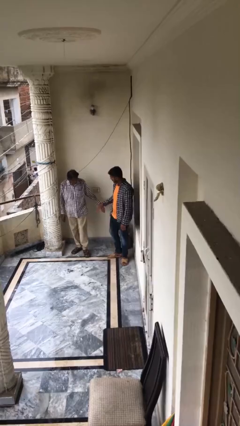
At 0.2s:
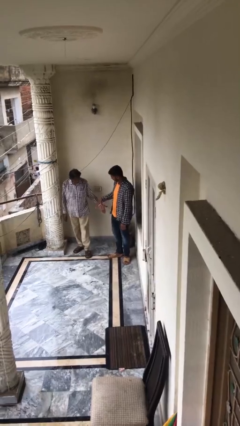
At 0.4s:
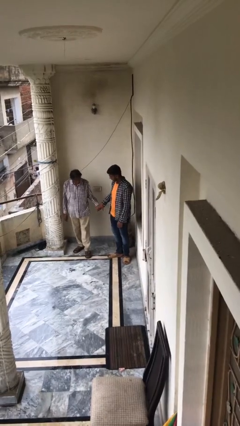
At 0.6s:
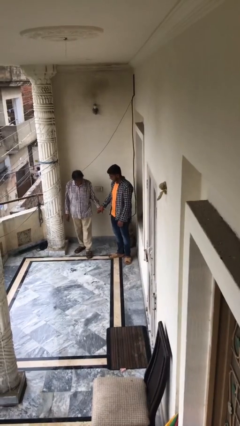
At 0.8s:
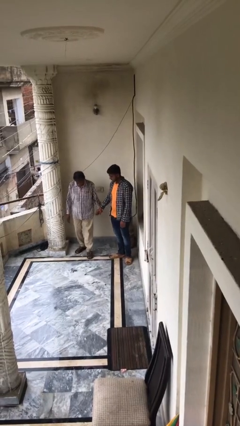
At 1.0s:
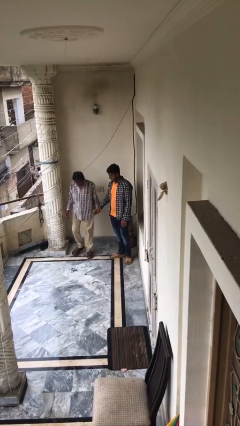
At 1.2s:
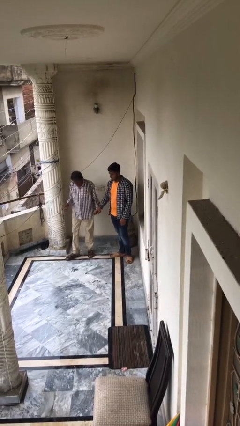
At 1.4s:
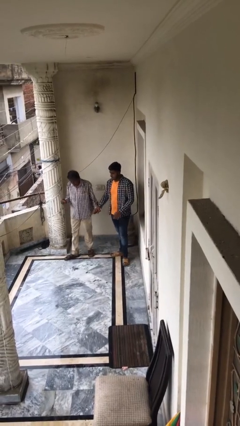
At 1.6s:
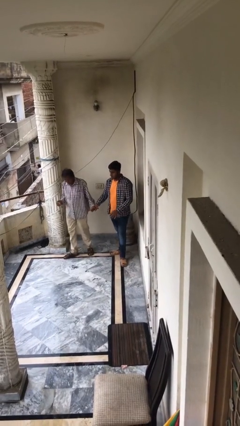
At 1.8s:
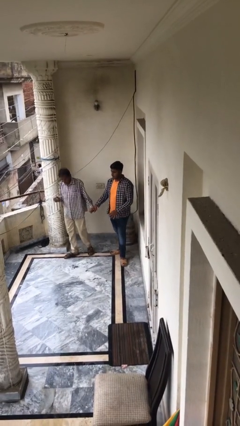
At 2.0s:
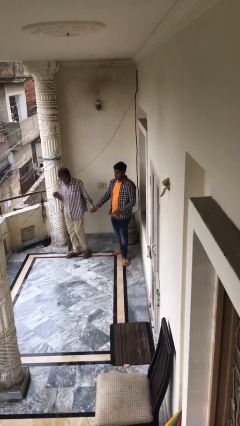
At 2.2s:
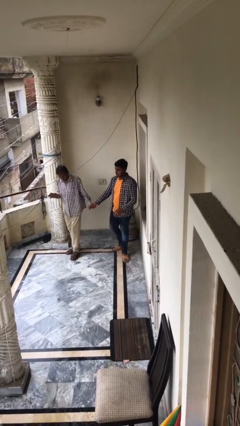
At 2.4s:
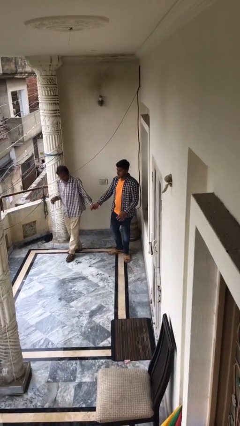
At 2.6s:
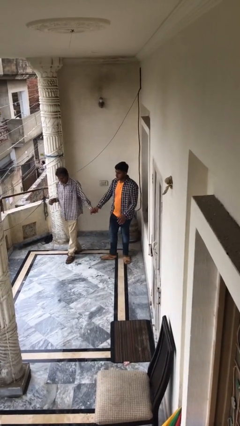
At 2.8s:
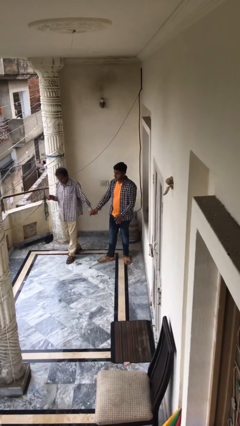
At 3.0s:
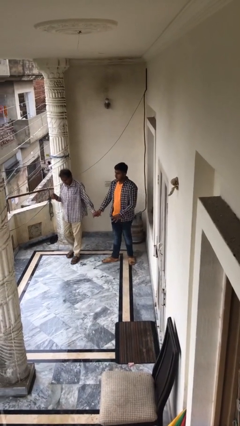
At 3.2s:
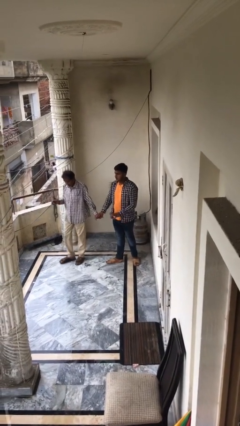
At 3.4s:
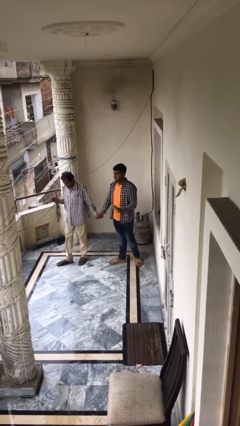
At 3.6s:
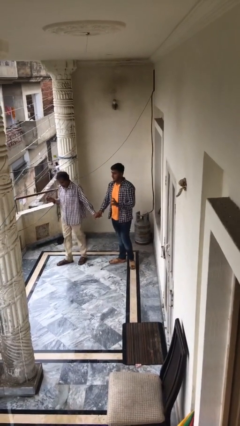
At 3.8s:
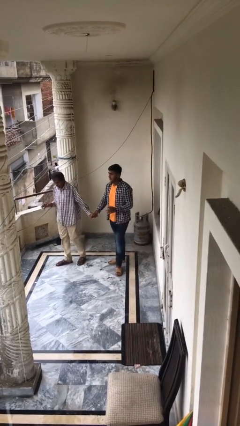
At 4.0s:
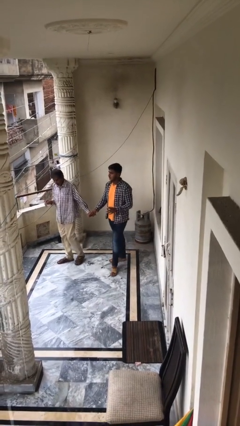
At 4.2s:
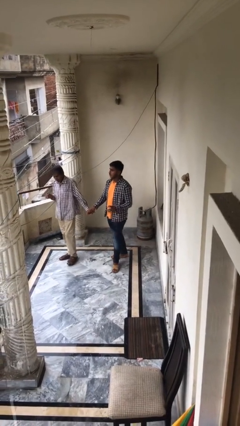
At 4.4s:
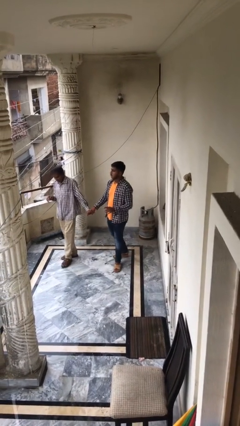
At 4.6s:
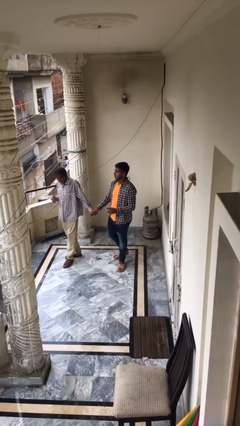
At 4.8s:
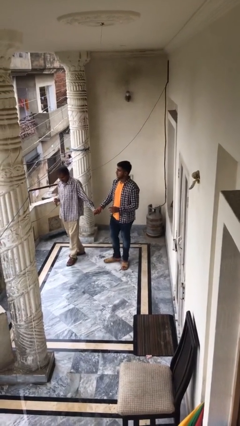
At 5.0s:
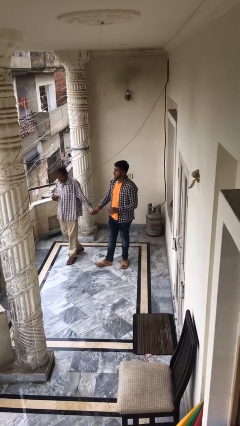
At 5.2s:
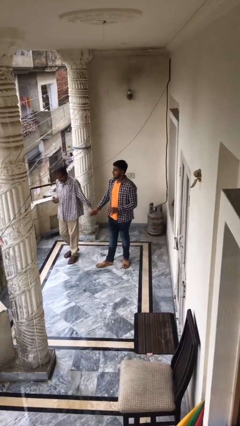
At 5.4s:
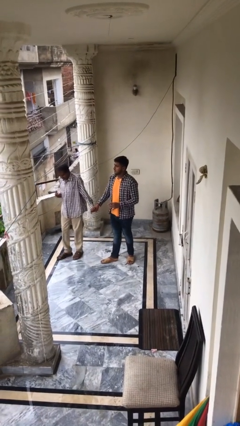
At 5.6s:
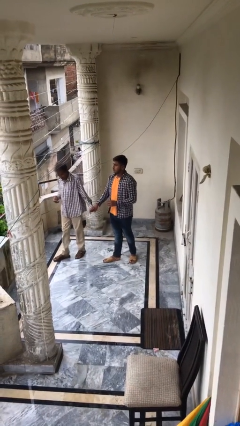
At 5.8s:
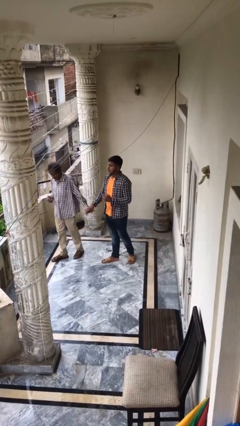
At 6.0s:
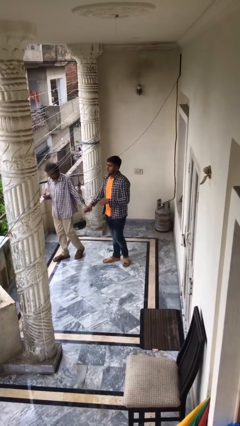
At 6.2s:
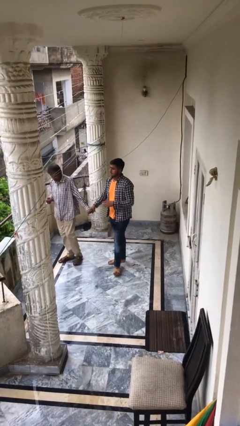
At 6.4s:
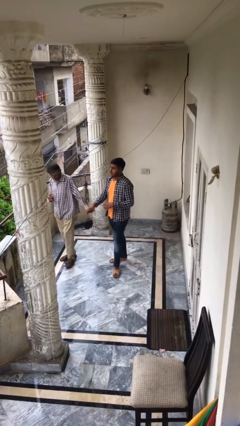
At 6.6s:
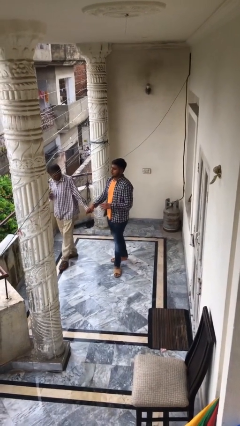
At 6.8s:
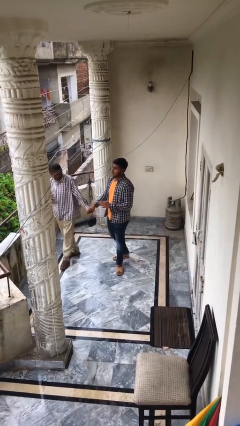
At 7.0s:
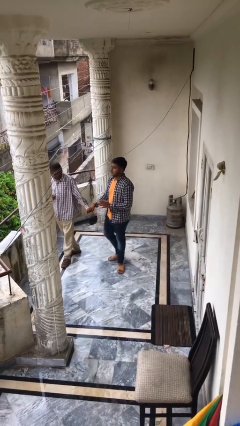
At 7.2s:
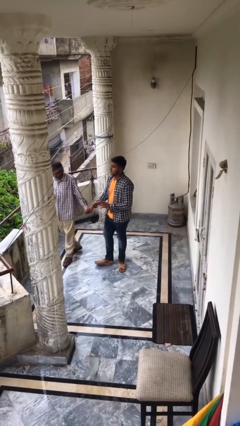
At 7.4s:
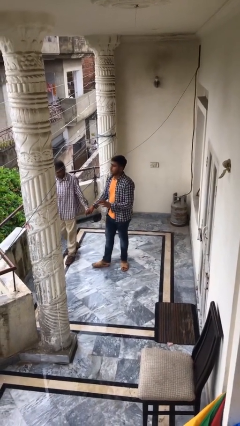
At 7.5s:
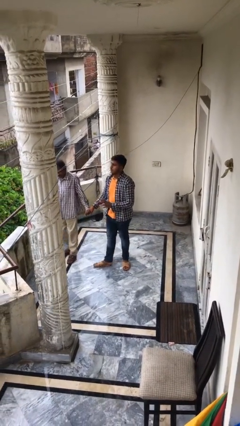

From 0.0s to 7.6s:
person holds hand

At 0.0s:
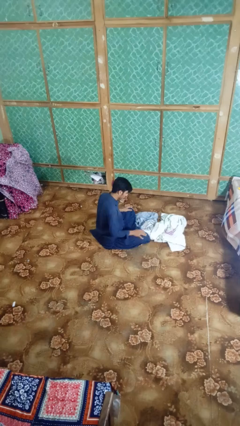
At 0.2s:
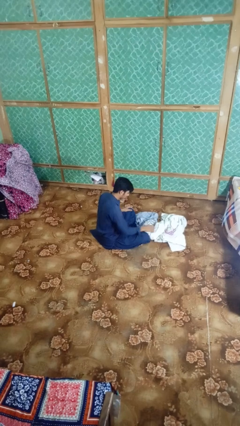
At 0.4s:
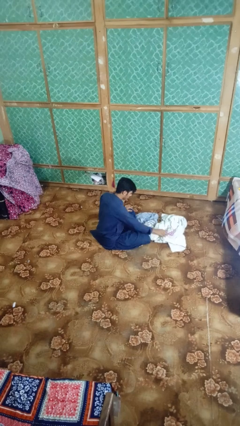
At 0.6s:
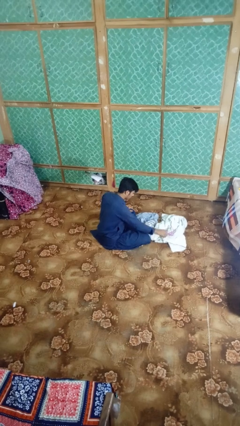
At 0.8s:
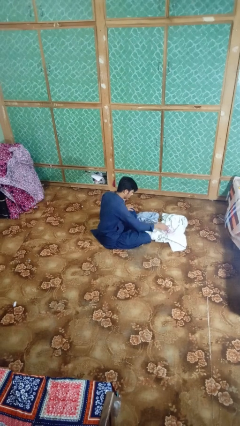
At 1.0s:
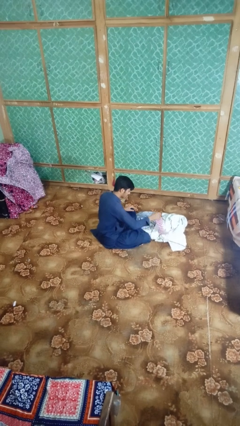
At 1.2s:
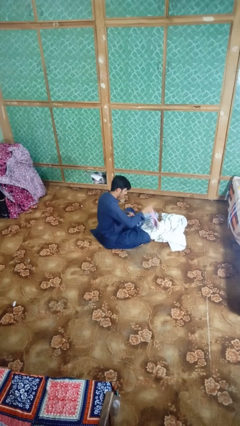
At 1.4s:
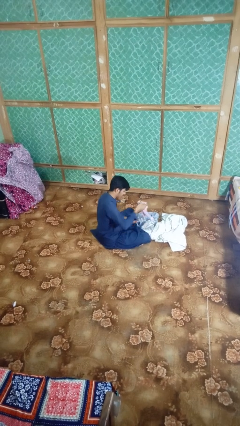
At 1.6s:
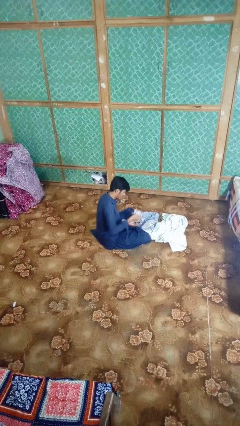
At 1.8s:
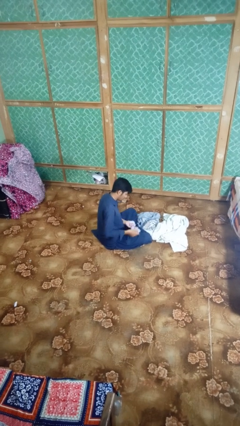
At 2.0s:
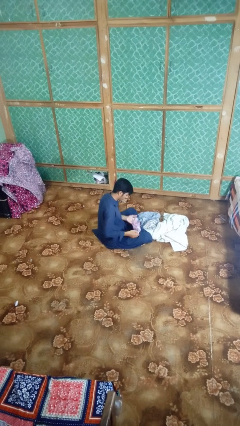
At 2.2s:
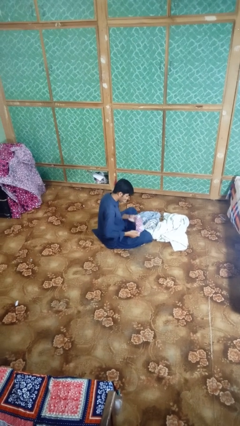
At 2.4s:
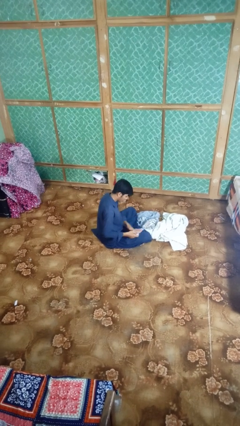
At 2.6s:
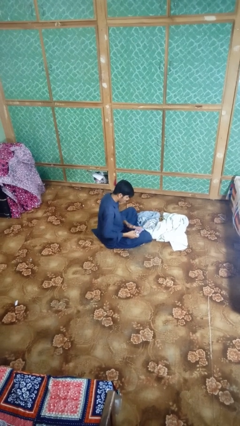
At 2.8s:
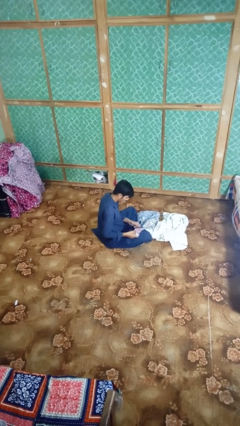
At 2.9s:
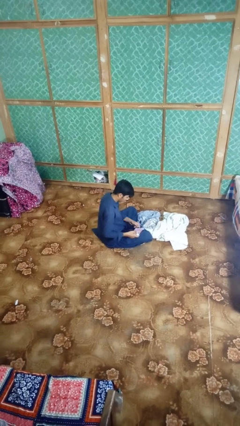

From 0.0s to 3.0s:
person folds socks

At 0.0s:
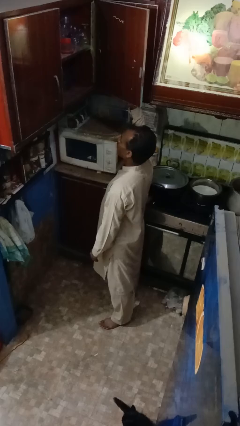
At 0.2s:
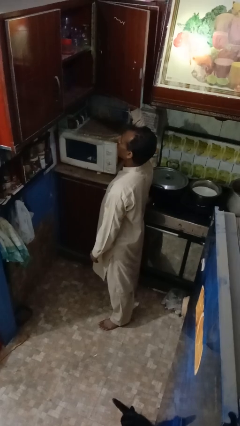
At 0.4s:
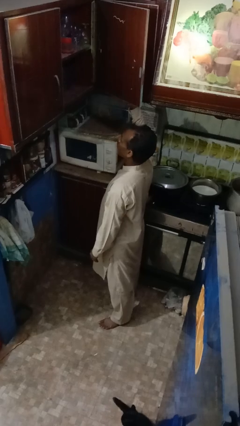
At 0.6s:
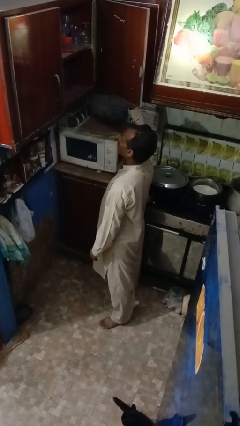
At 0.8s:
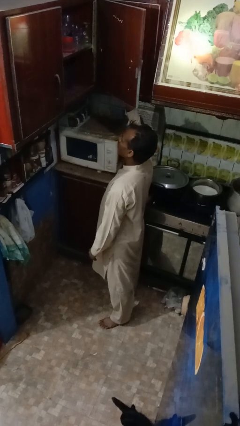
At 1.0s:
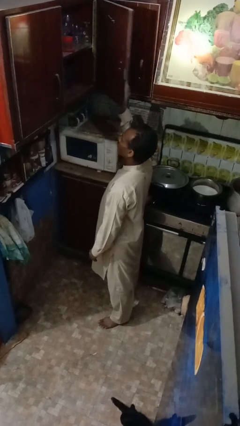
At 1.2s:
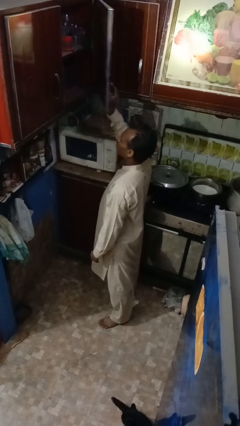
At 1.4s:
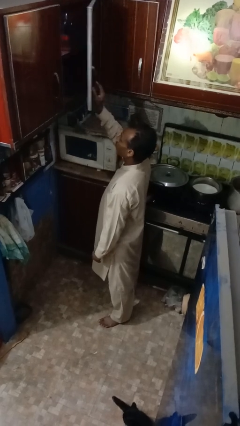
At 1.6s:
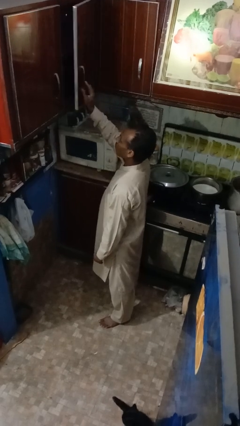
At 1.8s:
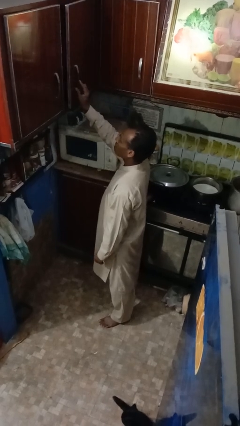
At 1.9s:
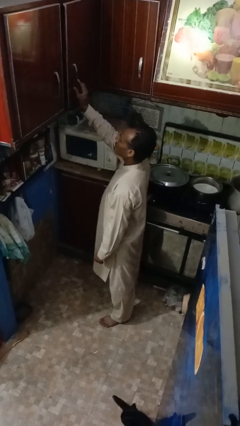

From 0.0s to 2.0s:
person closes cabinet

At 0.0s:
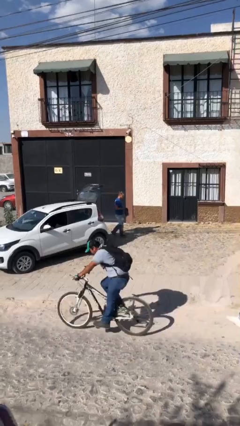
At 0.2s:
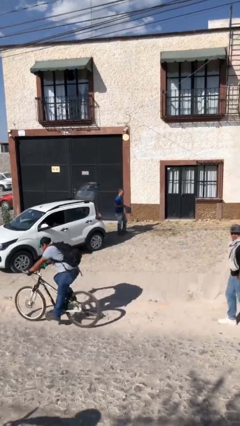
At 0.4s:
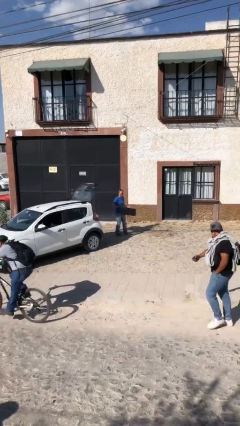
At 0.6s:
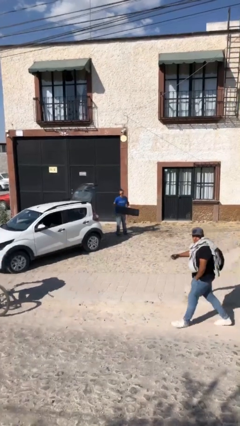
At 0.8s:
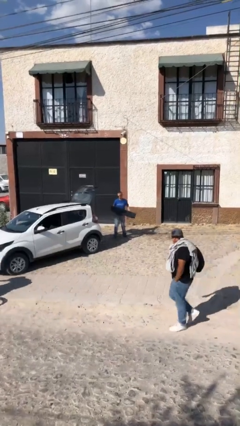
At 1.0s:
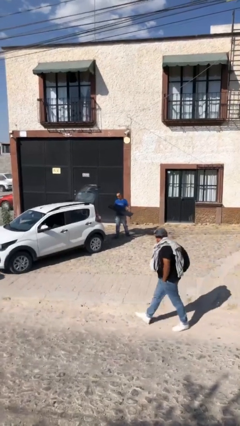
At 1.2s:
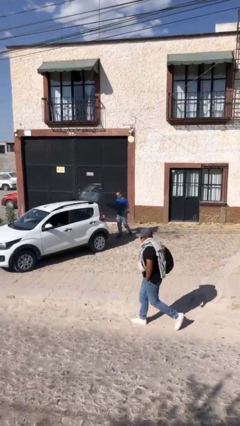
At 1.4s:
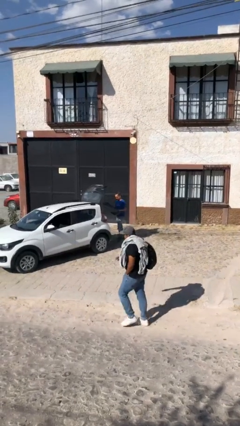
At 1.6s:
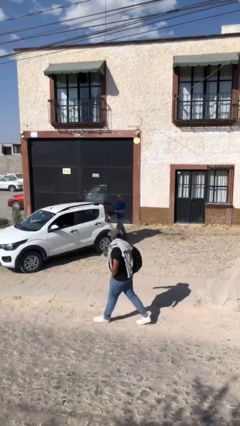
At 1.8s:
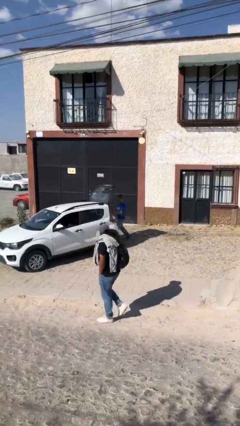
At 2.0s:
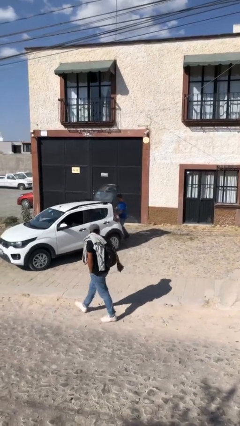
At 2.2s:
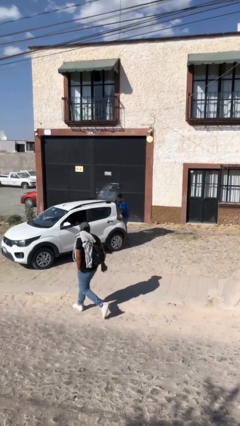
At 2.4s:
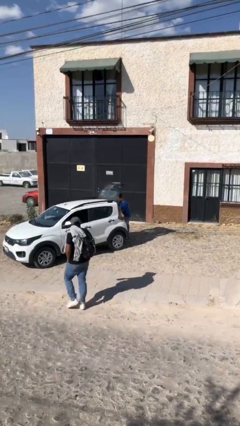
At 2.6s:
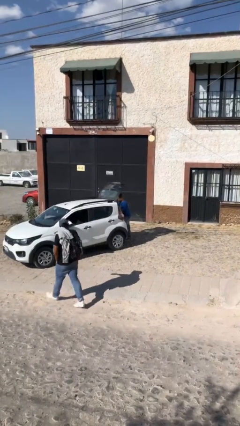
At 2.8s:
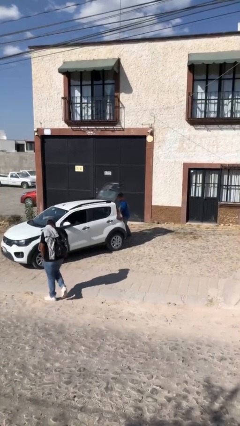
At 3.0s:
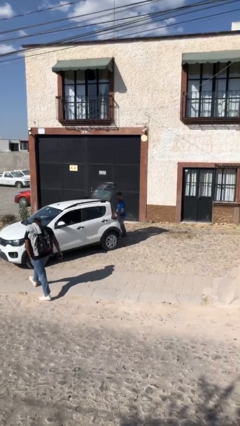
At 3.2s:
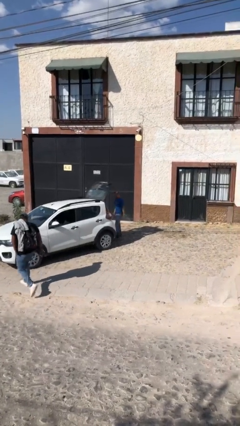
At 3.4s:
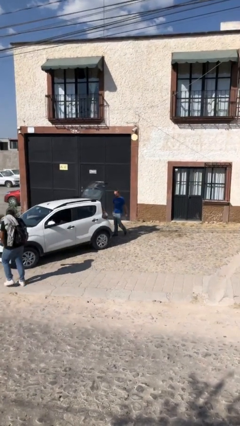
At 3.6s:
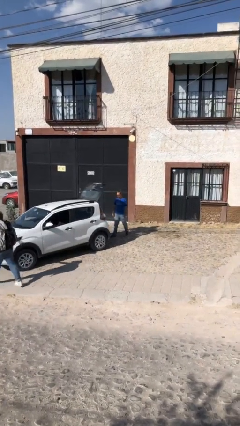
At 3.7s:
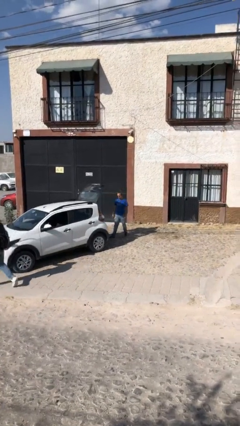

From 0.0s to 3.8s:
person loads car

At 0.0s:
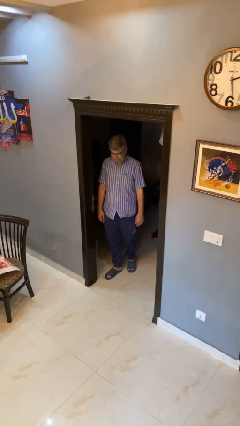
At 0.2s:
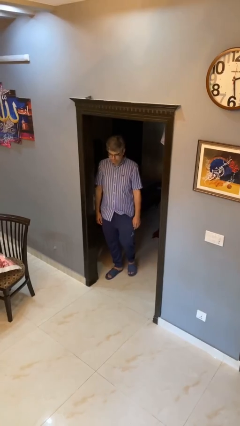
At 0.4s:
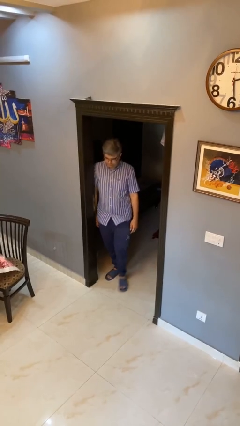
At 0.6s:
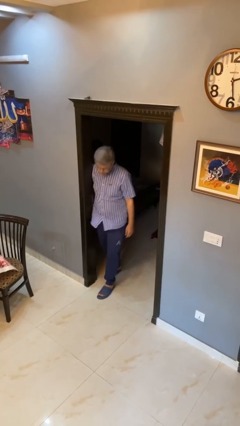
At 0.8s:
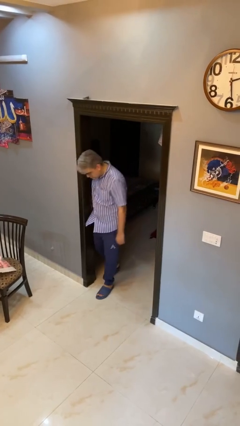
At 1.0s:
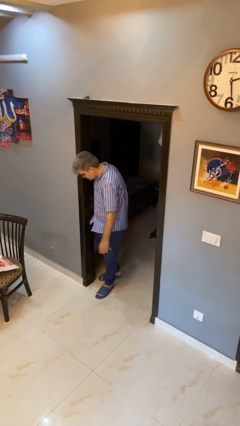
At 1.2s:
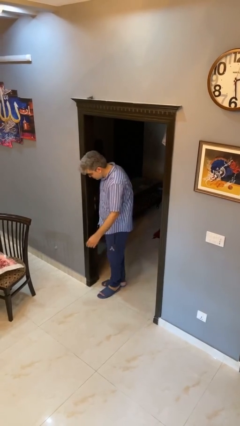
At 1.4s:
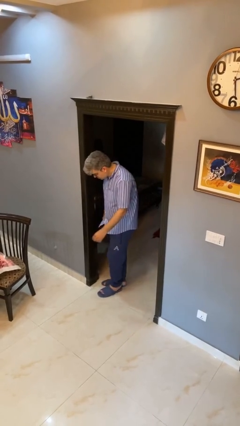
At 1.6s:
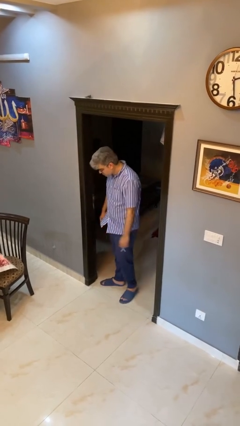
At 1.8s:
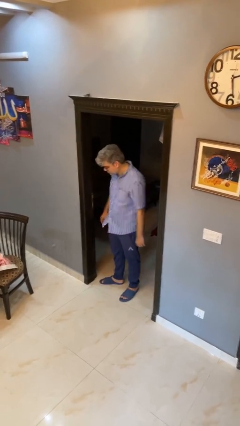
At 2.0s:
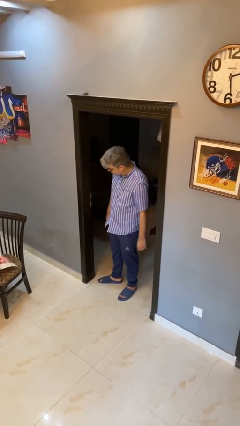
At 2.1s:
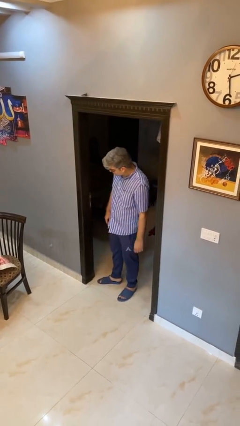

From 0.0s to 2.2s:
person bumps into wall
